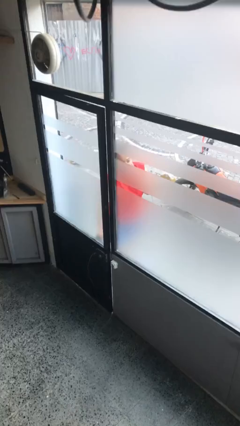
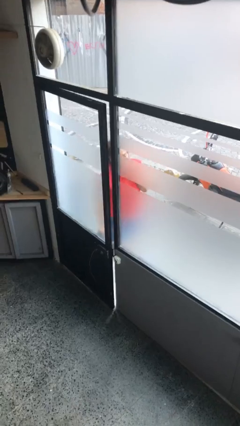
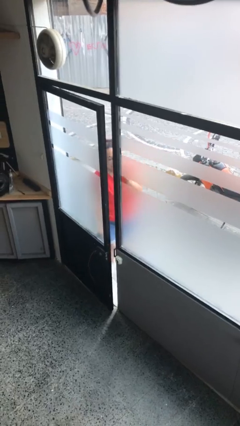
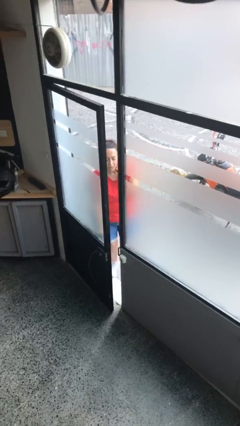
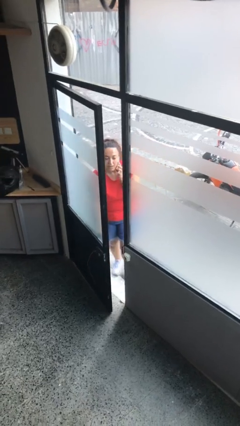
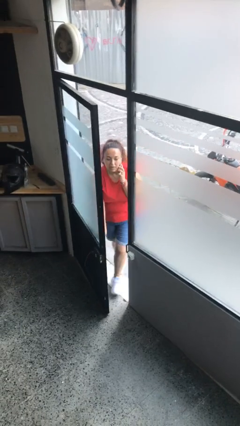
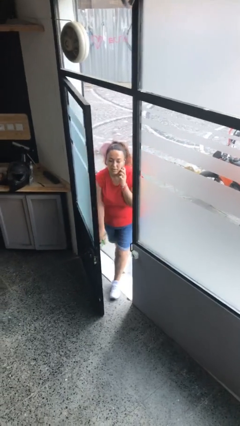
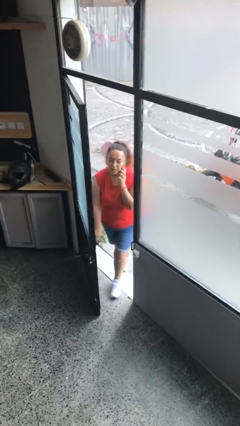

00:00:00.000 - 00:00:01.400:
person opens facility door

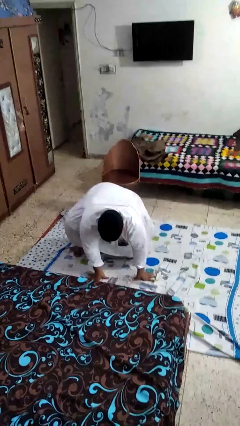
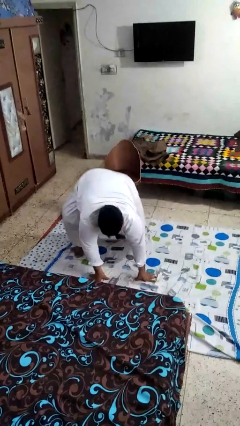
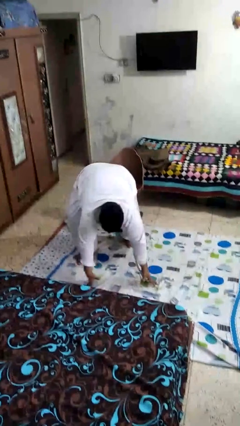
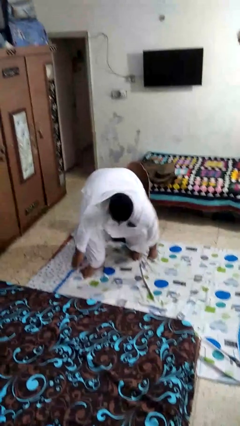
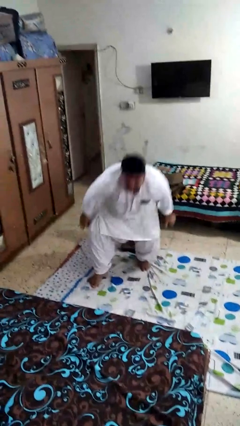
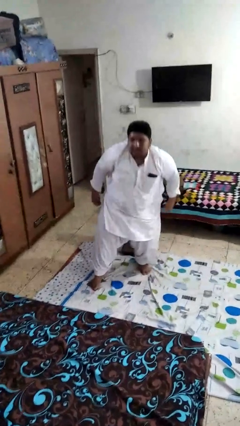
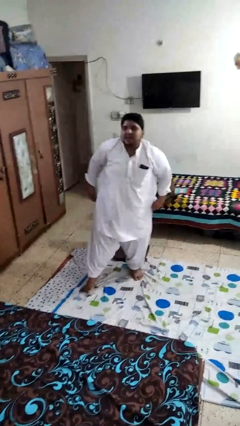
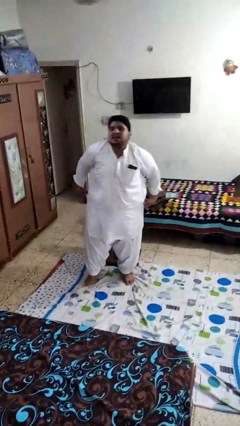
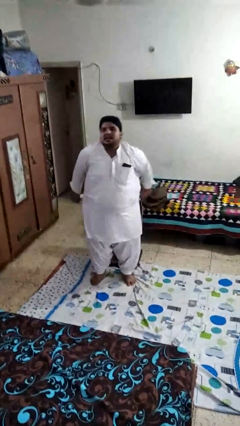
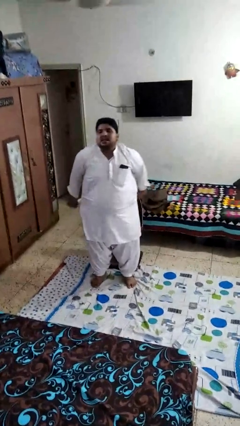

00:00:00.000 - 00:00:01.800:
person stands up from floor

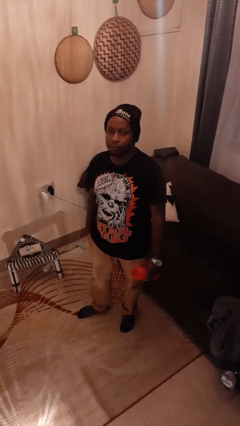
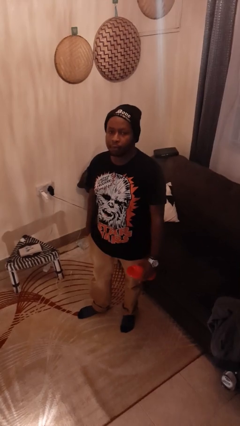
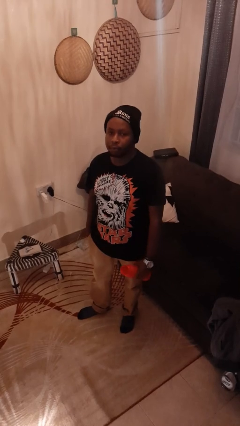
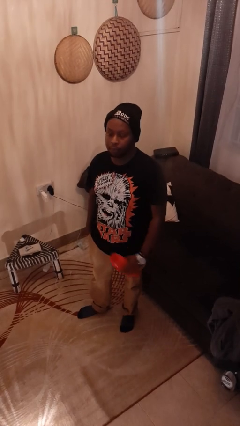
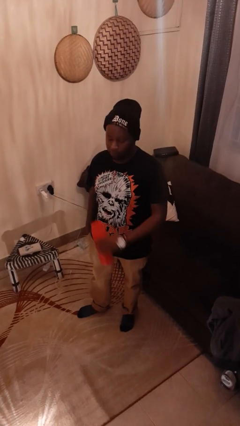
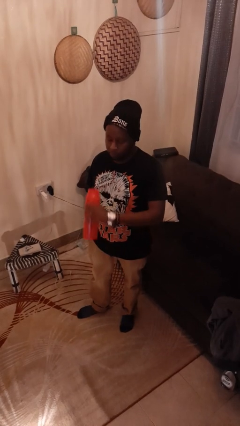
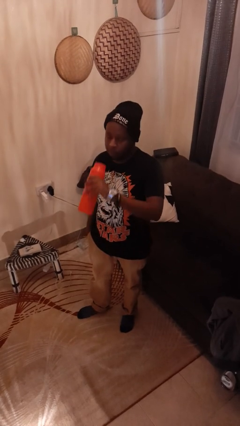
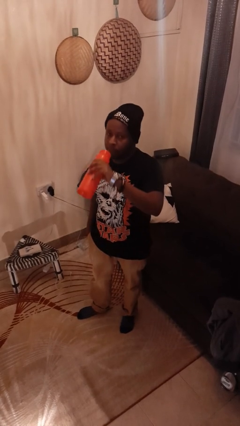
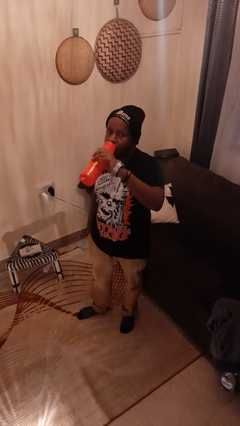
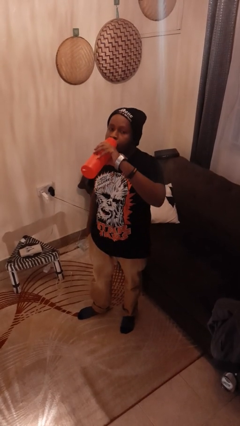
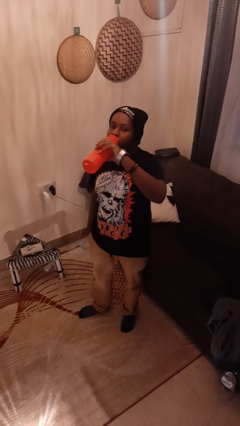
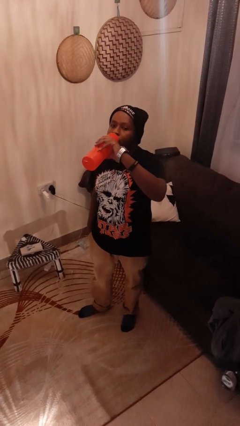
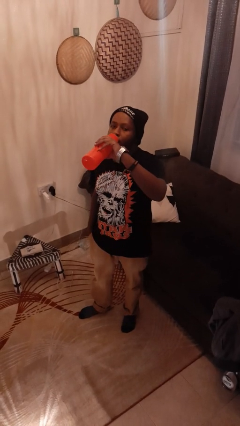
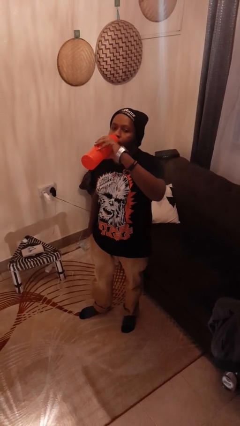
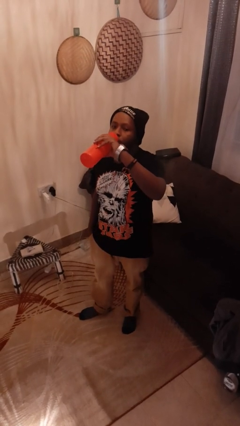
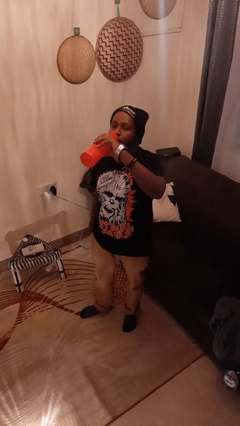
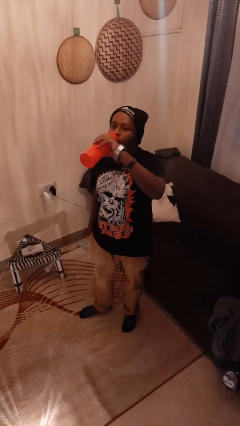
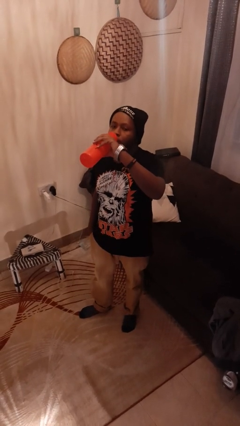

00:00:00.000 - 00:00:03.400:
person drinks from bottle

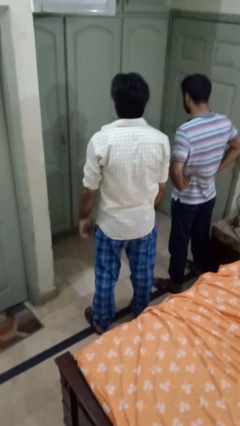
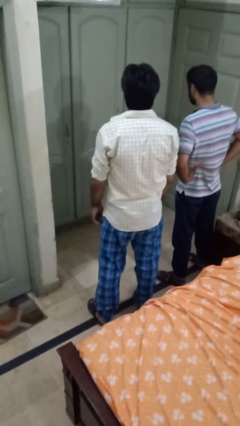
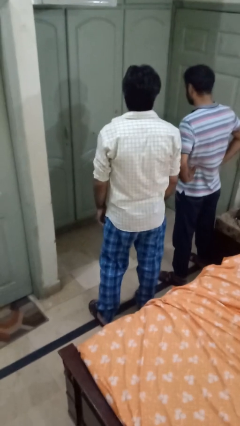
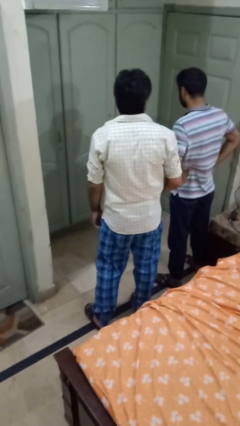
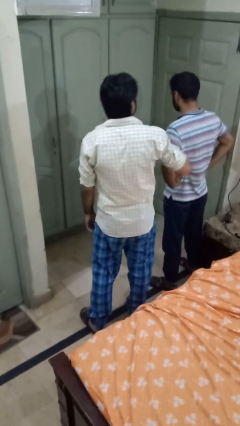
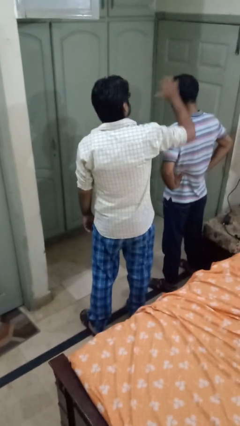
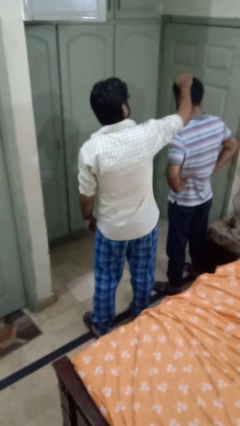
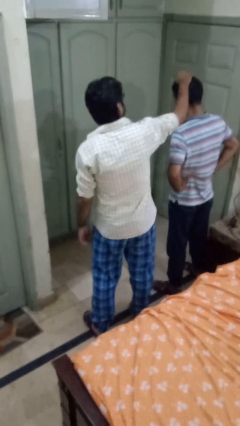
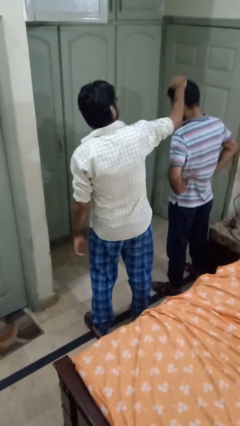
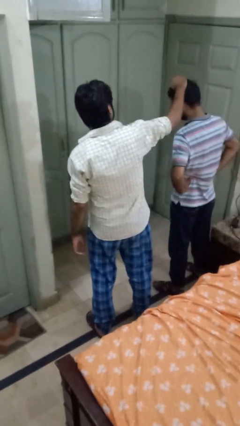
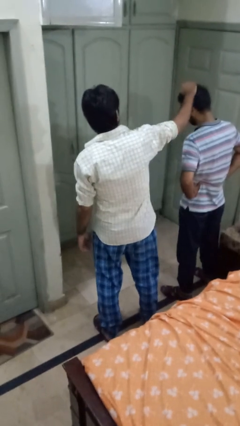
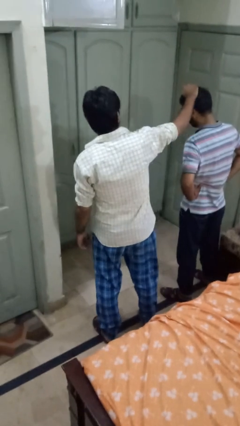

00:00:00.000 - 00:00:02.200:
person grabs person by hair

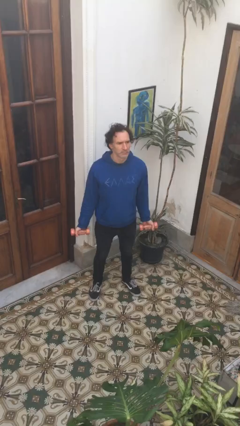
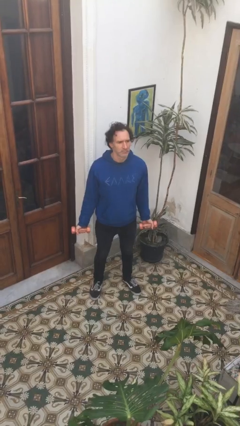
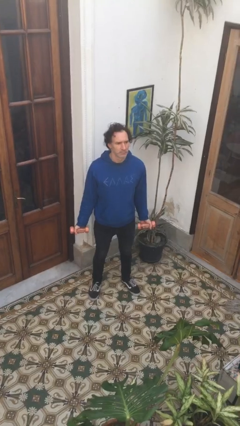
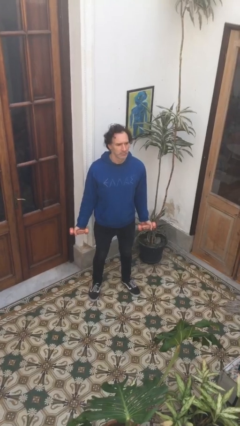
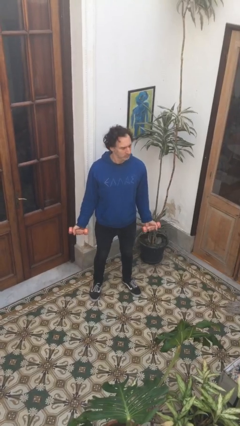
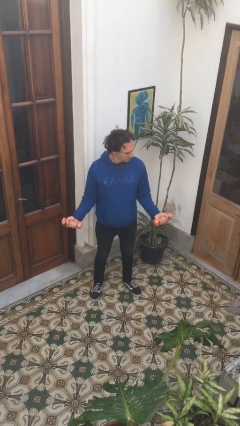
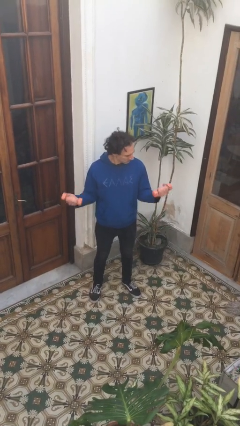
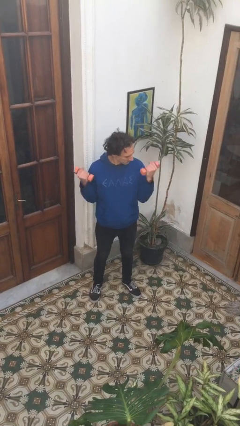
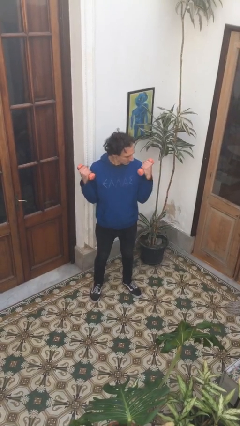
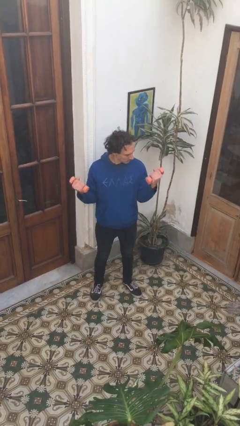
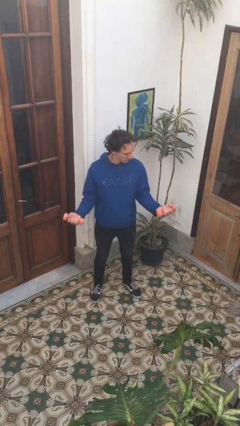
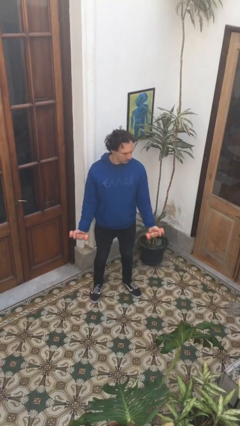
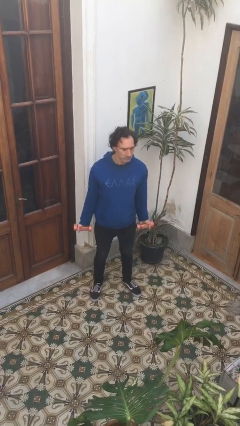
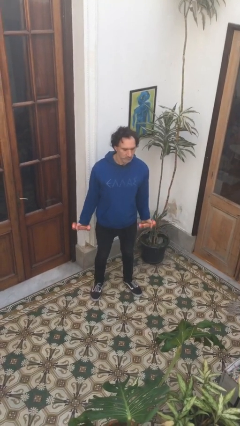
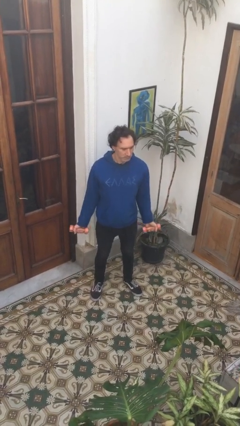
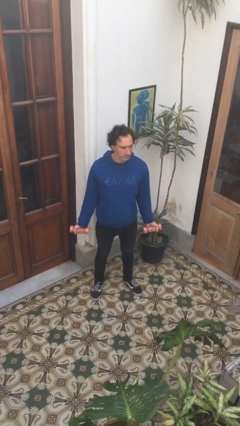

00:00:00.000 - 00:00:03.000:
person lifts dumbbells

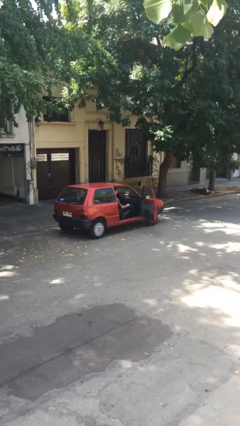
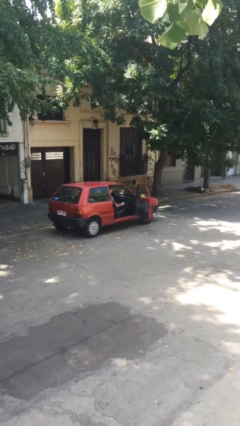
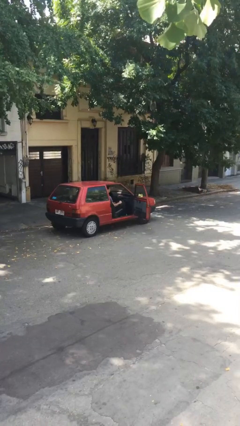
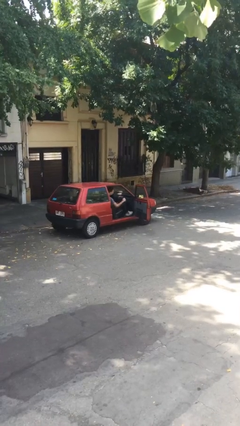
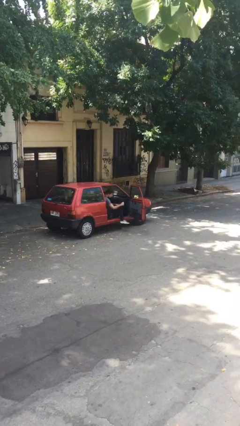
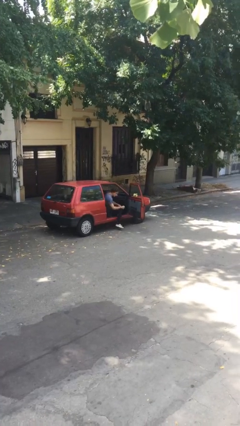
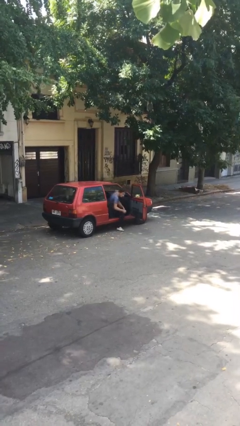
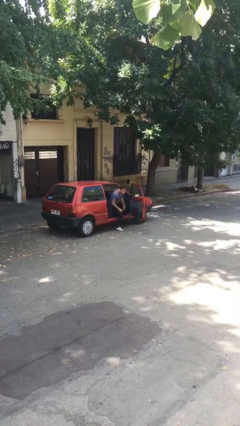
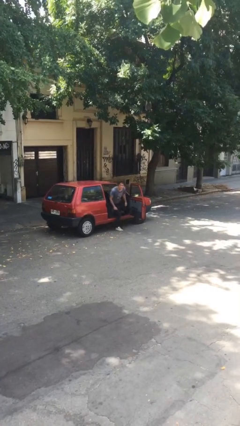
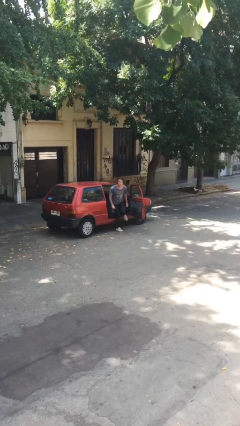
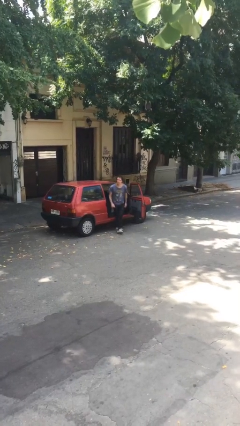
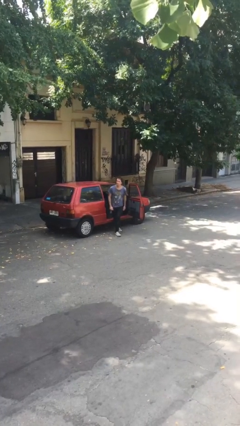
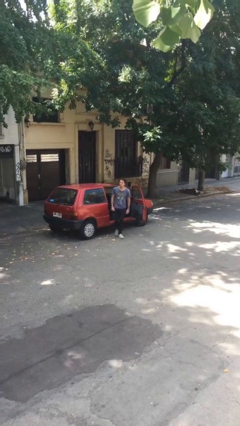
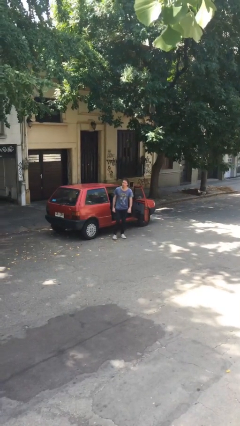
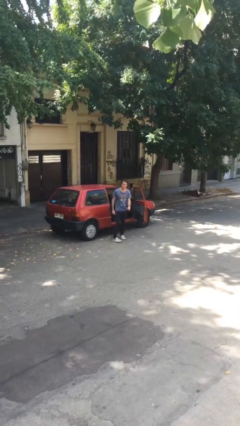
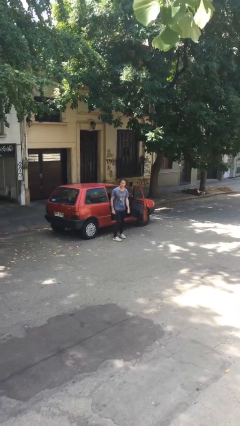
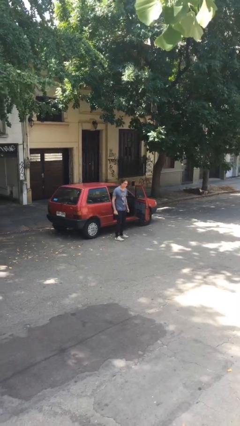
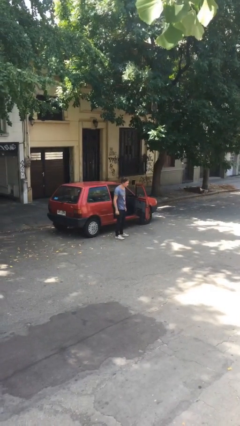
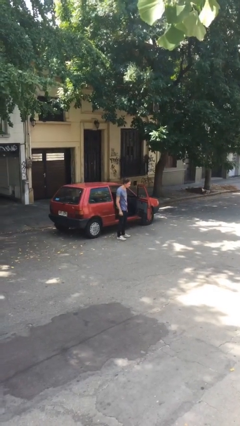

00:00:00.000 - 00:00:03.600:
person exits car

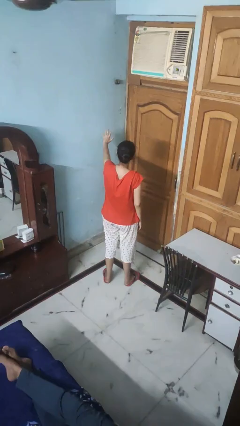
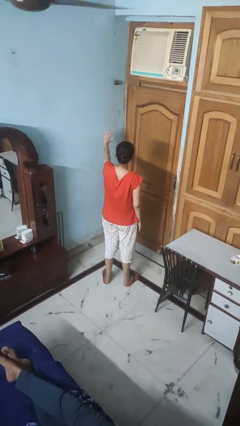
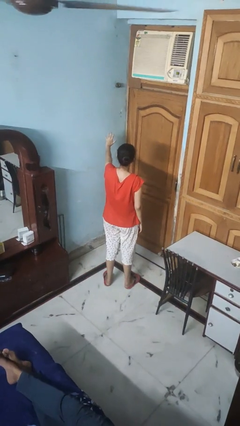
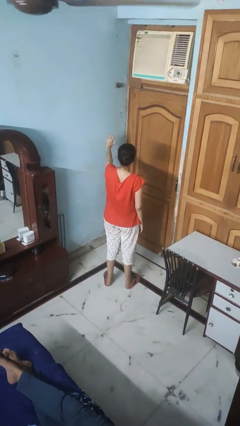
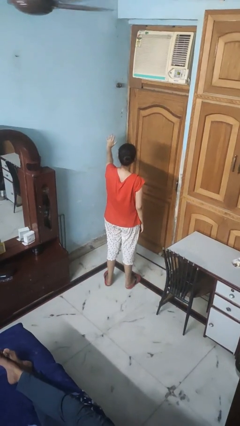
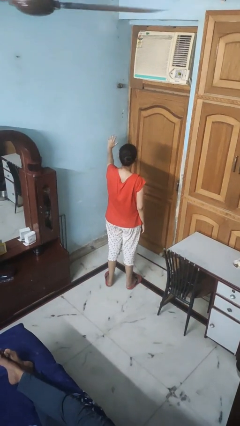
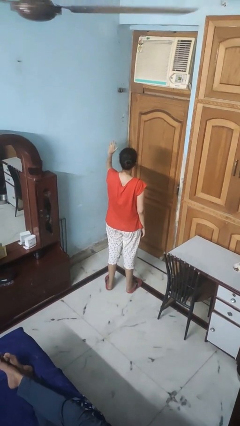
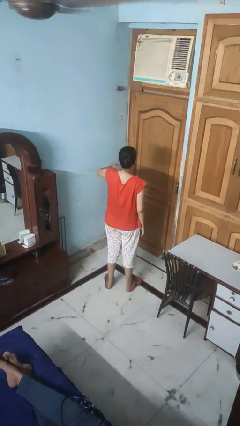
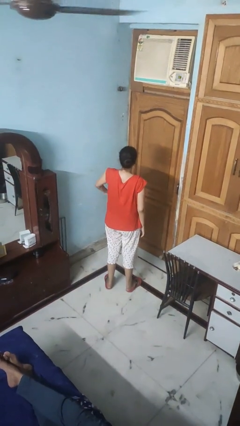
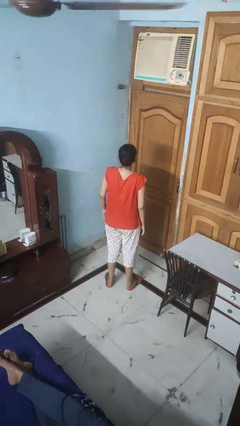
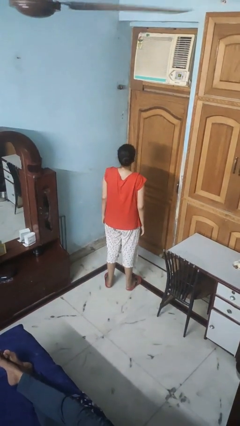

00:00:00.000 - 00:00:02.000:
person gestures number five
